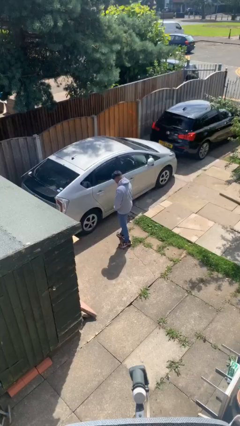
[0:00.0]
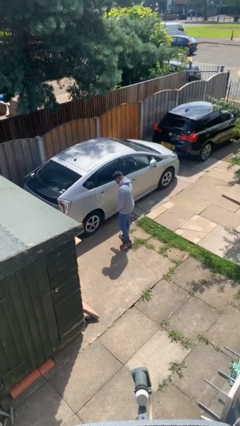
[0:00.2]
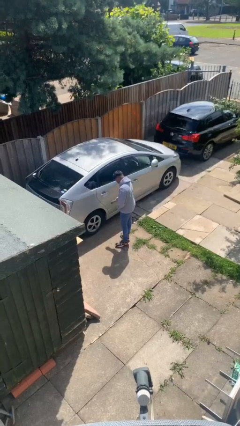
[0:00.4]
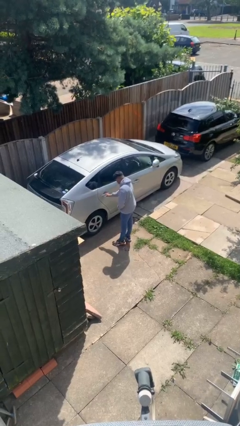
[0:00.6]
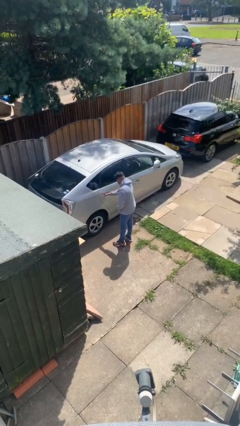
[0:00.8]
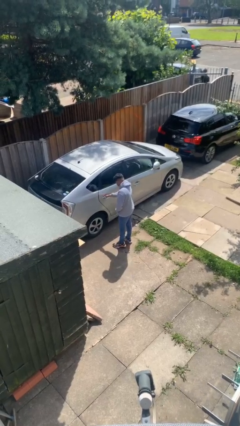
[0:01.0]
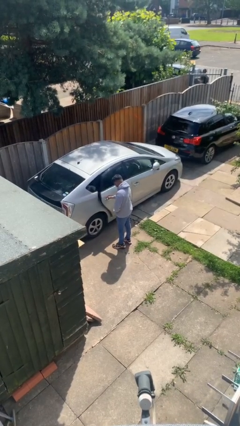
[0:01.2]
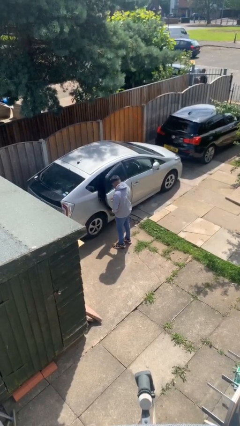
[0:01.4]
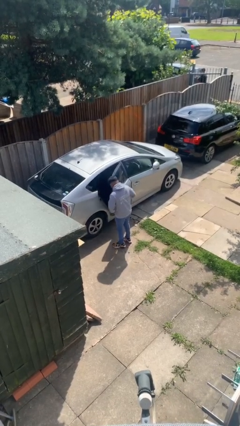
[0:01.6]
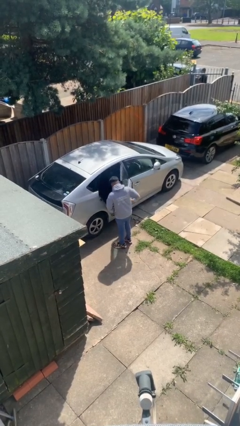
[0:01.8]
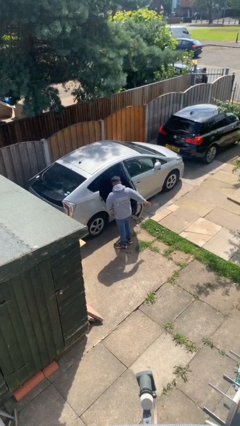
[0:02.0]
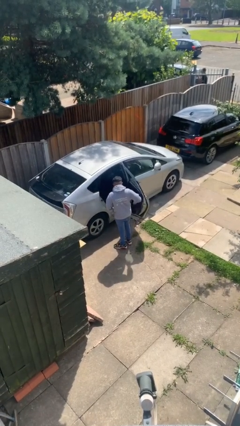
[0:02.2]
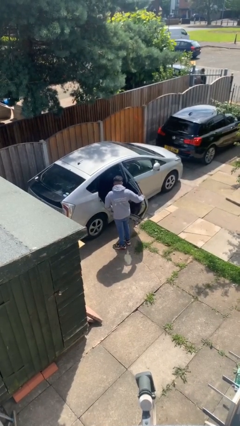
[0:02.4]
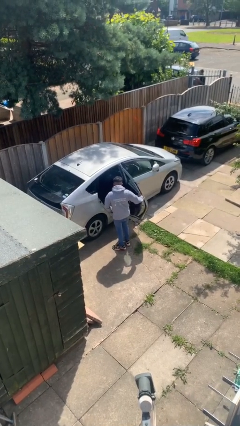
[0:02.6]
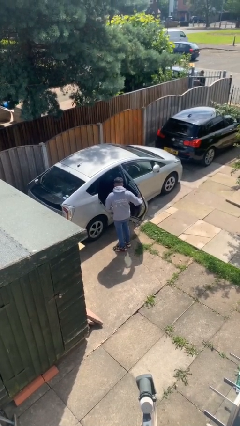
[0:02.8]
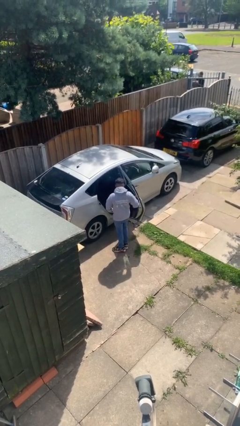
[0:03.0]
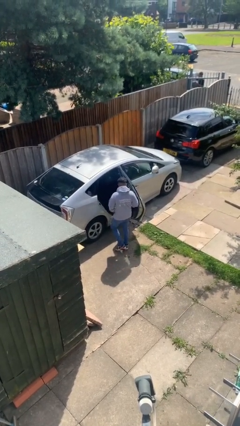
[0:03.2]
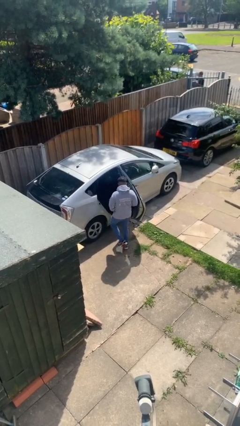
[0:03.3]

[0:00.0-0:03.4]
person opens car door

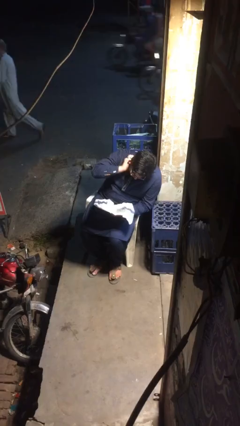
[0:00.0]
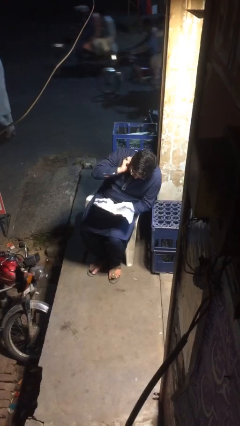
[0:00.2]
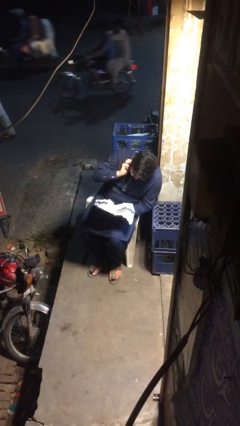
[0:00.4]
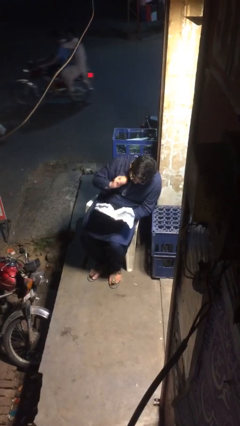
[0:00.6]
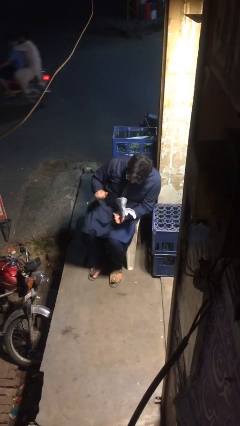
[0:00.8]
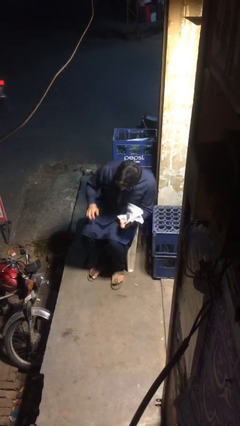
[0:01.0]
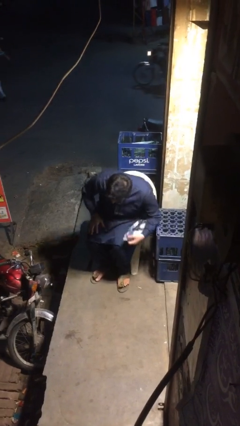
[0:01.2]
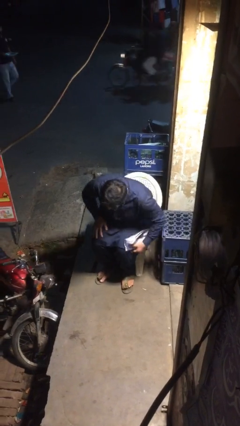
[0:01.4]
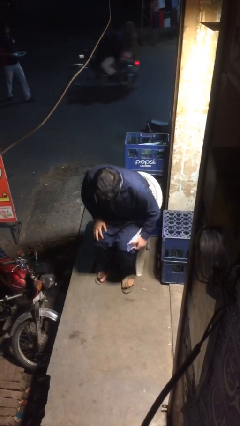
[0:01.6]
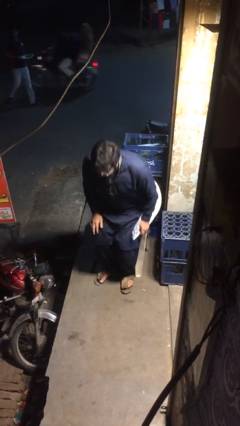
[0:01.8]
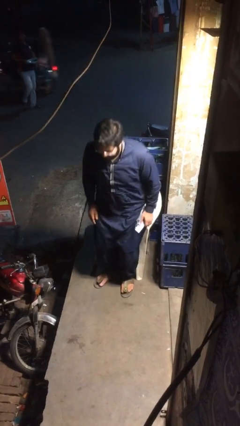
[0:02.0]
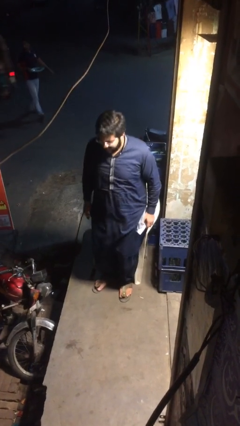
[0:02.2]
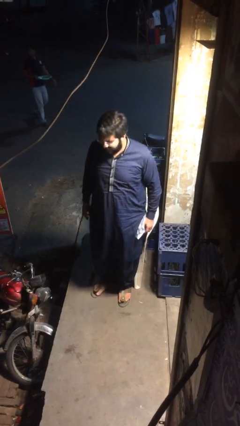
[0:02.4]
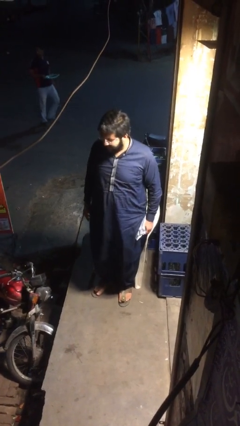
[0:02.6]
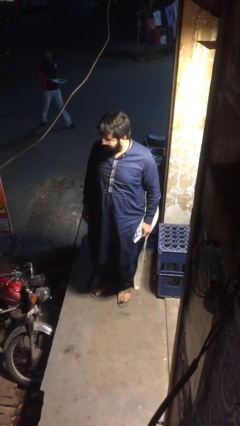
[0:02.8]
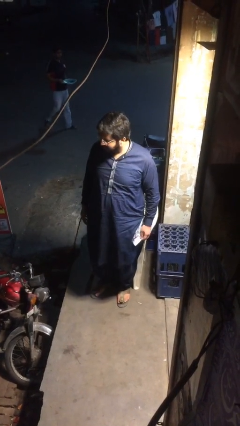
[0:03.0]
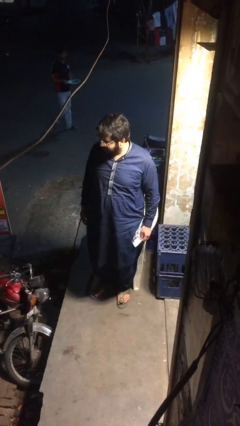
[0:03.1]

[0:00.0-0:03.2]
person stands up

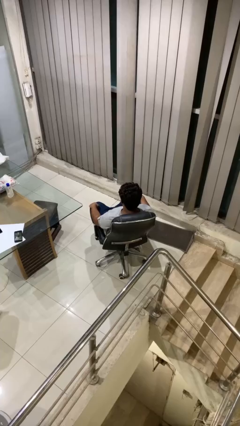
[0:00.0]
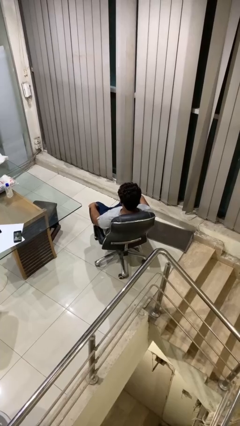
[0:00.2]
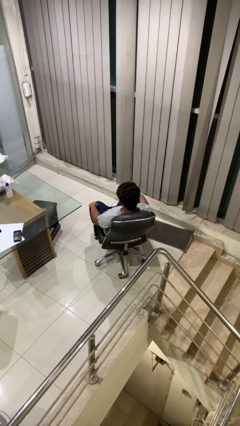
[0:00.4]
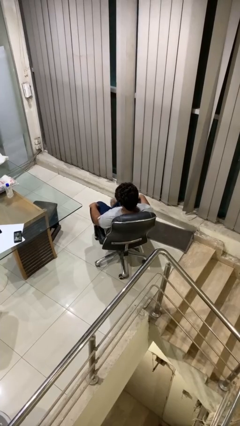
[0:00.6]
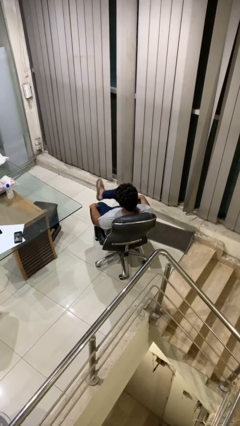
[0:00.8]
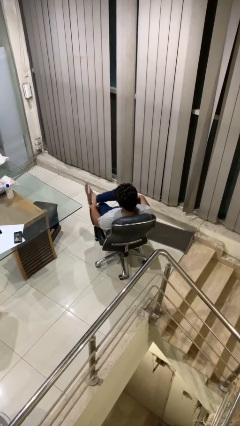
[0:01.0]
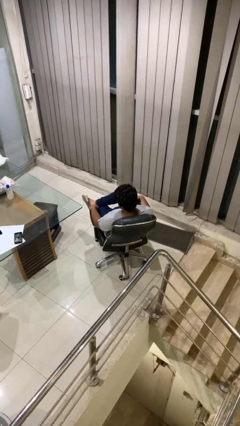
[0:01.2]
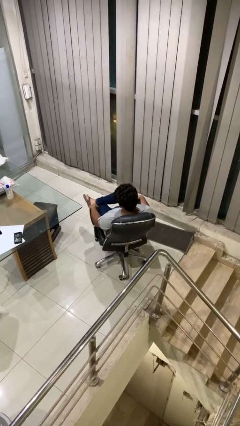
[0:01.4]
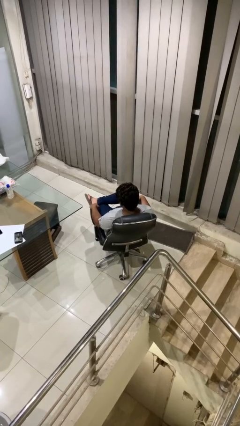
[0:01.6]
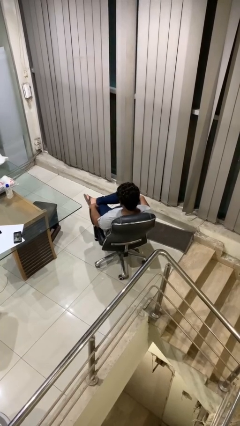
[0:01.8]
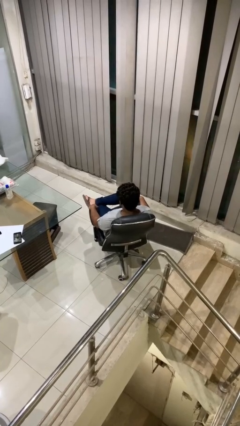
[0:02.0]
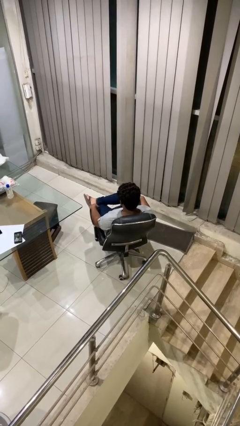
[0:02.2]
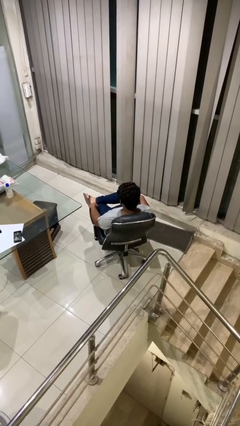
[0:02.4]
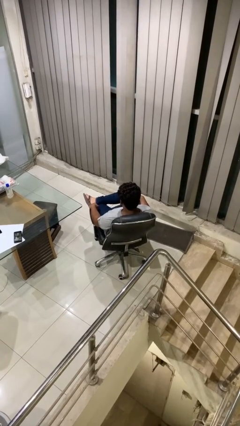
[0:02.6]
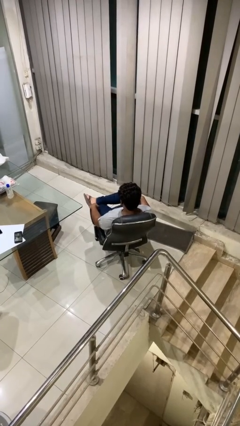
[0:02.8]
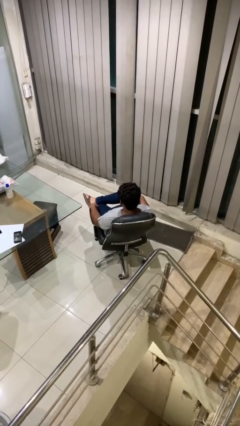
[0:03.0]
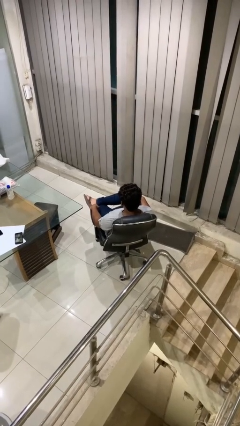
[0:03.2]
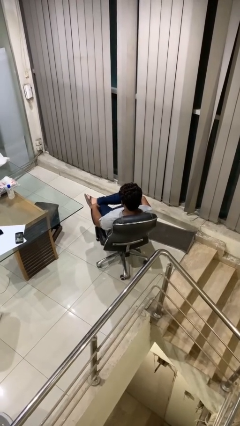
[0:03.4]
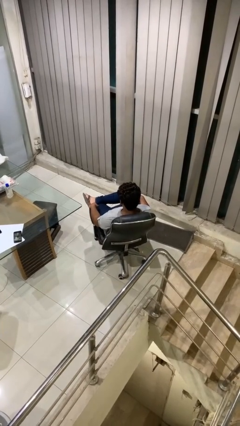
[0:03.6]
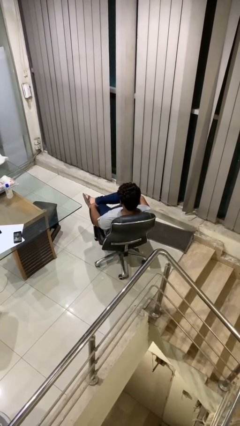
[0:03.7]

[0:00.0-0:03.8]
person crosses legs

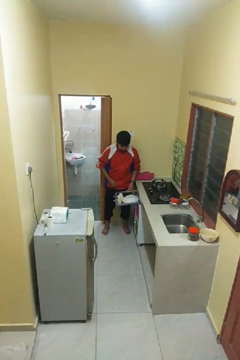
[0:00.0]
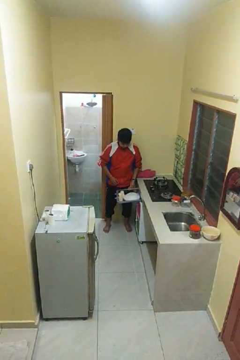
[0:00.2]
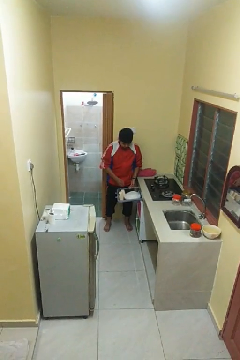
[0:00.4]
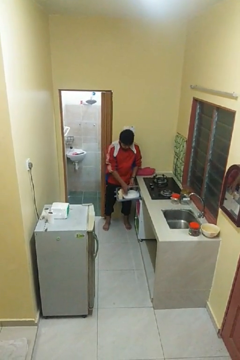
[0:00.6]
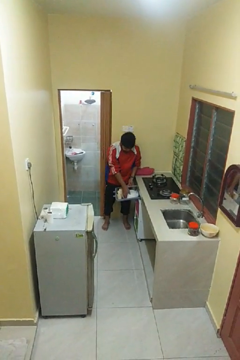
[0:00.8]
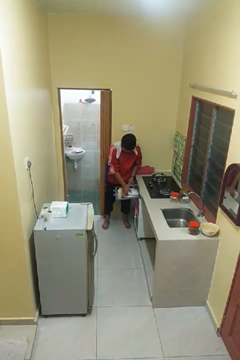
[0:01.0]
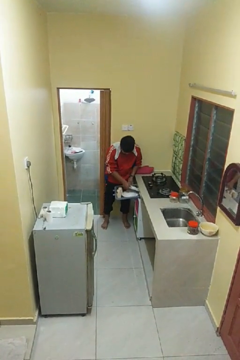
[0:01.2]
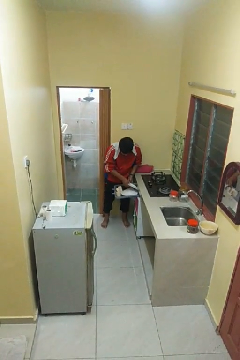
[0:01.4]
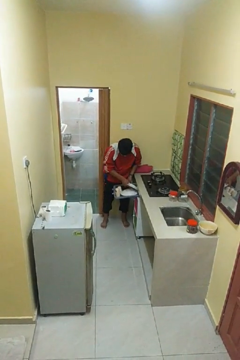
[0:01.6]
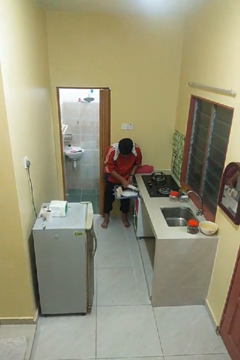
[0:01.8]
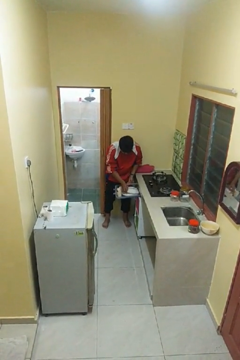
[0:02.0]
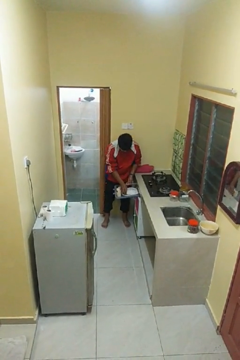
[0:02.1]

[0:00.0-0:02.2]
person searches in kitchen drawer

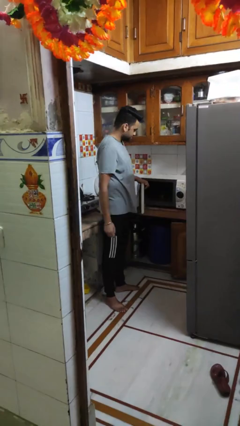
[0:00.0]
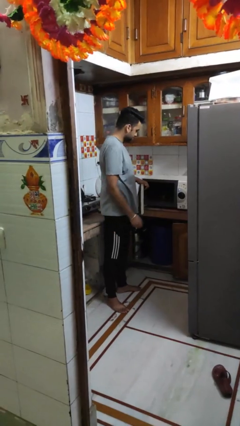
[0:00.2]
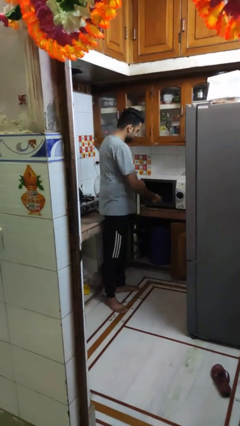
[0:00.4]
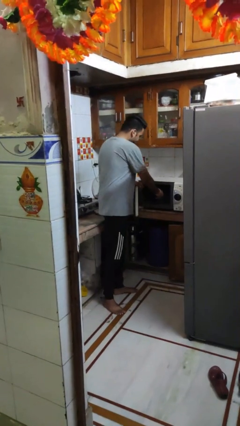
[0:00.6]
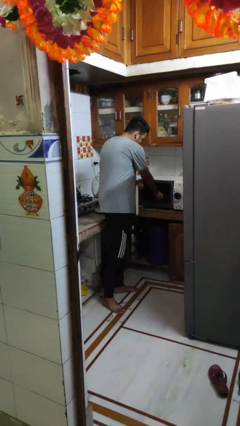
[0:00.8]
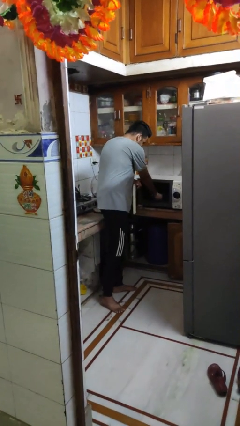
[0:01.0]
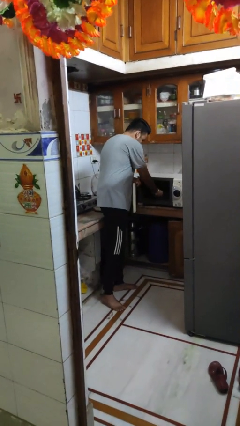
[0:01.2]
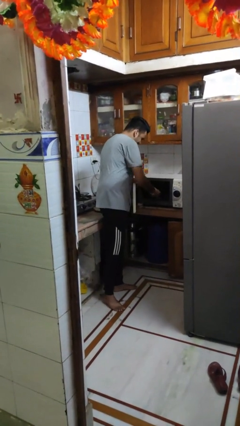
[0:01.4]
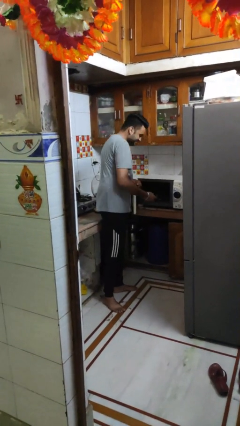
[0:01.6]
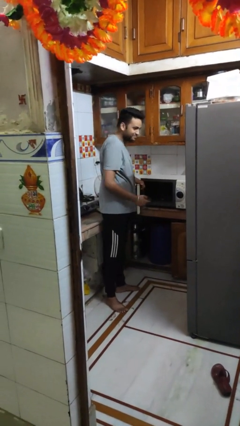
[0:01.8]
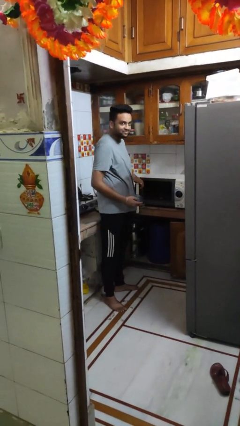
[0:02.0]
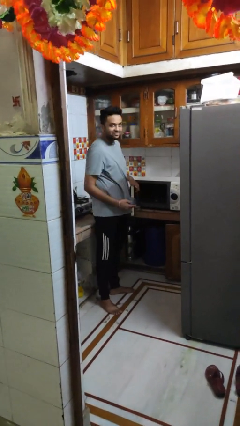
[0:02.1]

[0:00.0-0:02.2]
person takes object from microwave

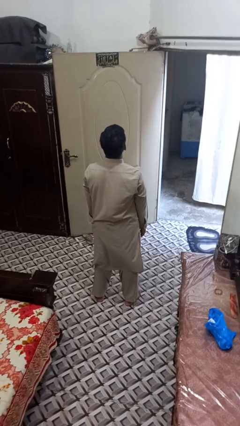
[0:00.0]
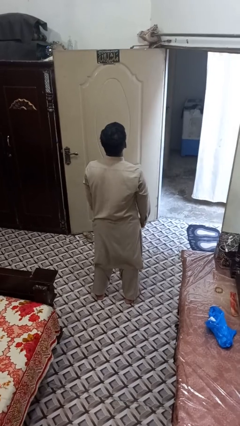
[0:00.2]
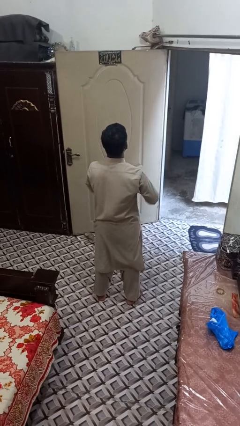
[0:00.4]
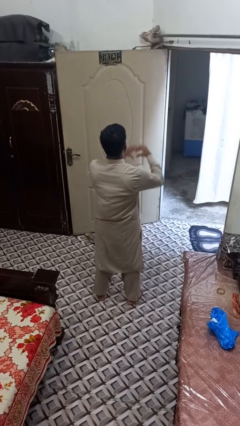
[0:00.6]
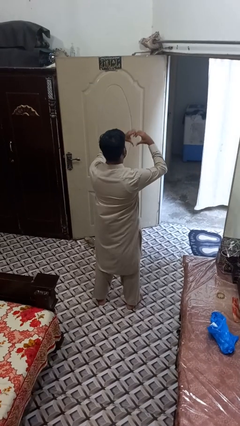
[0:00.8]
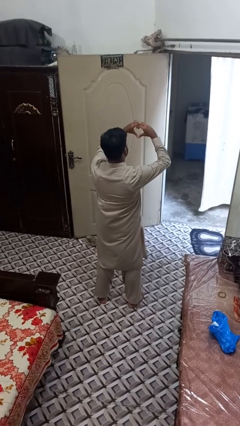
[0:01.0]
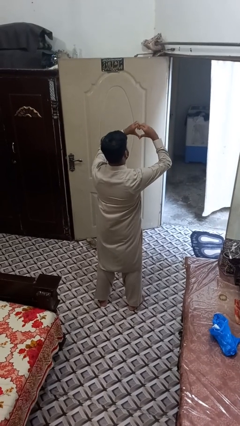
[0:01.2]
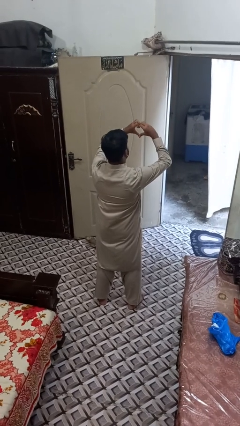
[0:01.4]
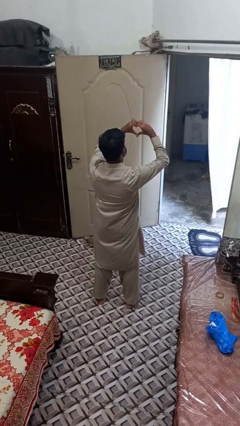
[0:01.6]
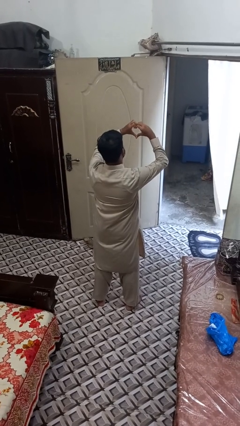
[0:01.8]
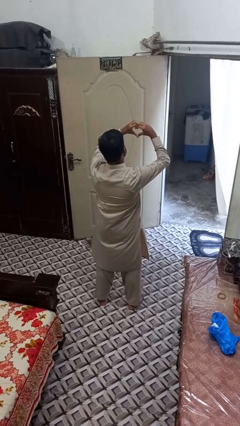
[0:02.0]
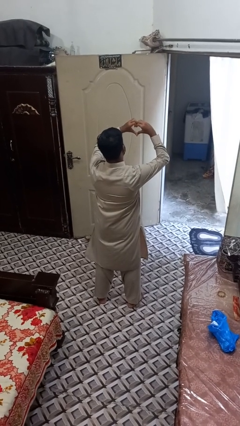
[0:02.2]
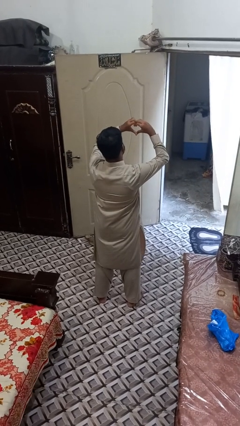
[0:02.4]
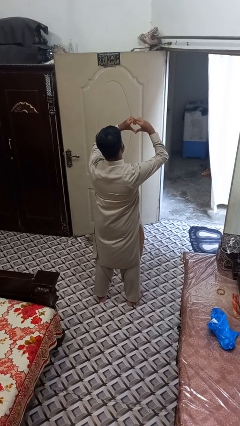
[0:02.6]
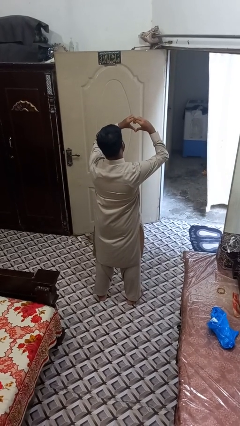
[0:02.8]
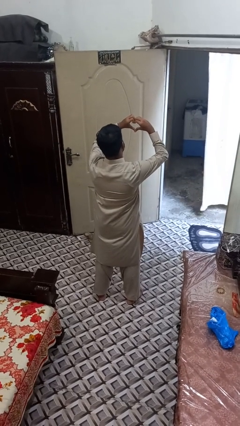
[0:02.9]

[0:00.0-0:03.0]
person gestures heart
